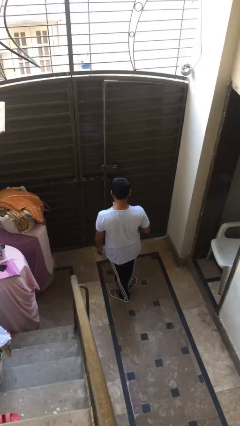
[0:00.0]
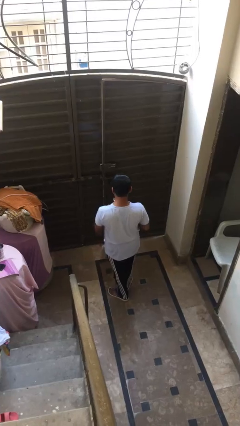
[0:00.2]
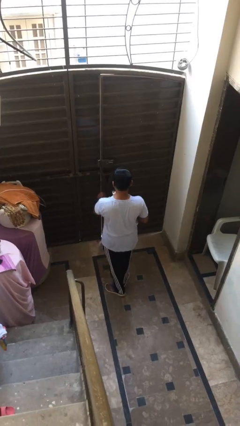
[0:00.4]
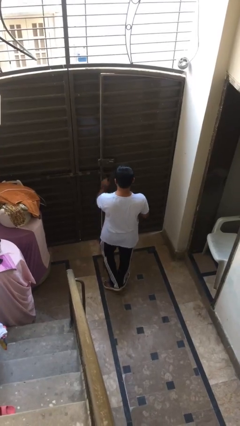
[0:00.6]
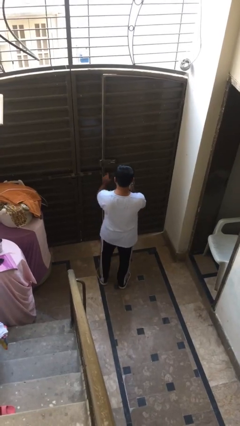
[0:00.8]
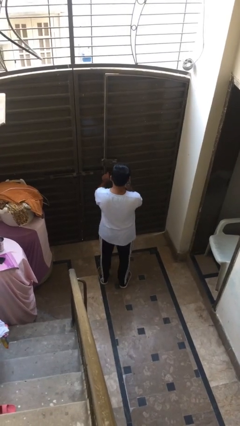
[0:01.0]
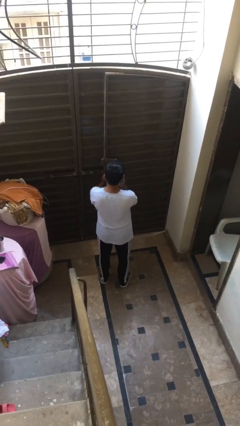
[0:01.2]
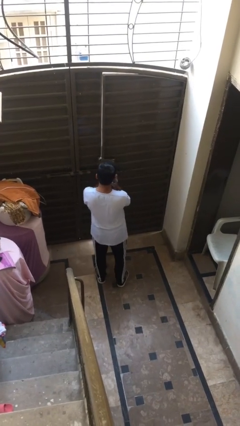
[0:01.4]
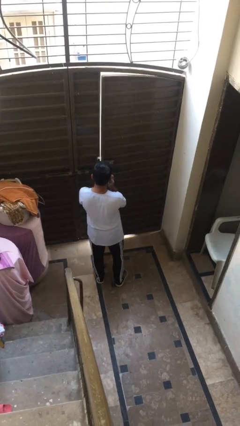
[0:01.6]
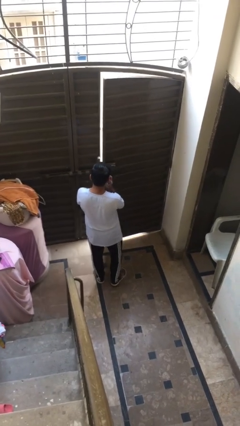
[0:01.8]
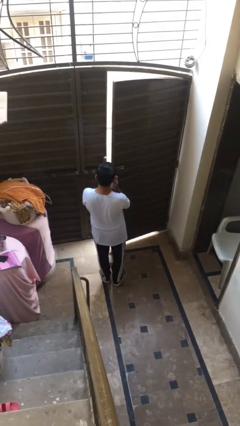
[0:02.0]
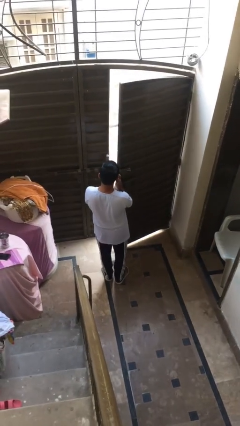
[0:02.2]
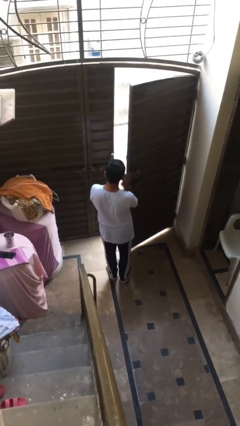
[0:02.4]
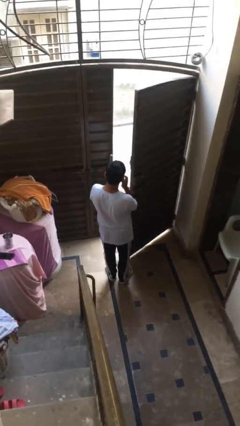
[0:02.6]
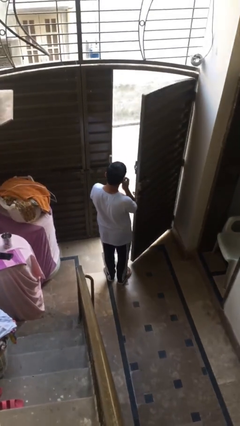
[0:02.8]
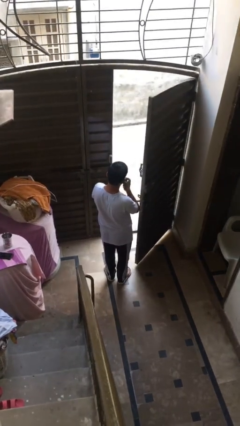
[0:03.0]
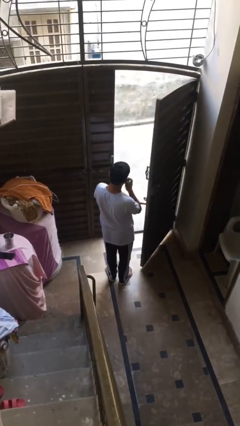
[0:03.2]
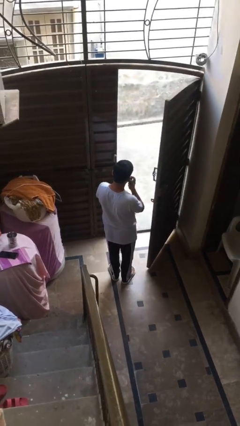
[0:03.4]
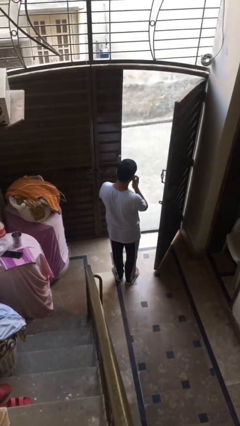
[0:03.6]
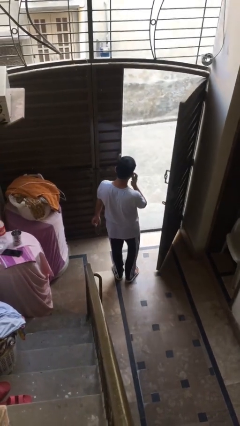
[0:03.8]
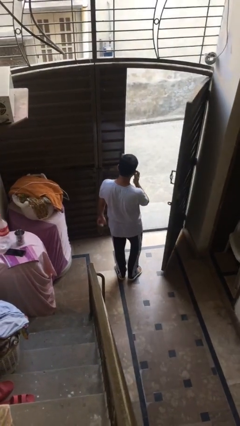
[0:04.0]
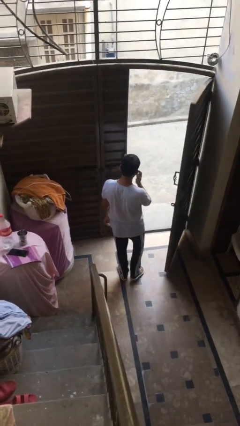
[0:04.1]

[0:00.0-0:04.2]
person opens facility door

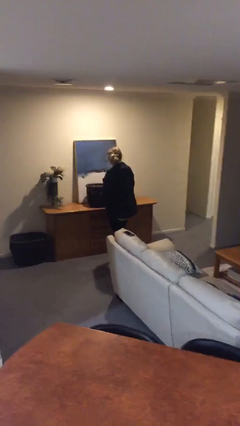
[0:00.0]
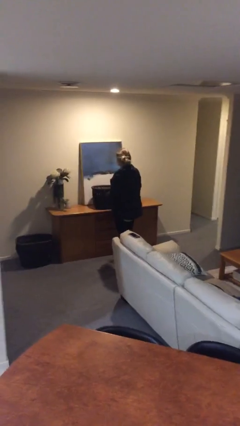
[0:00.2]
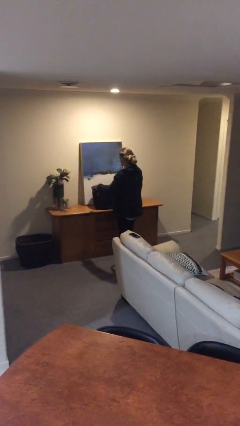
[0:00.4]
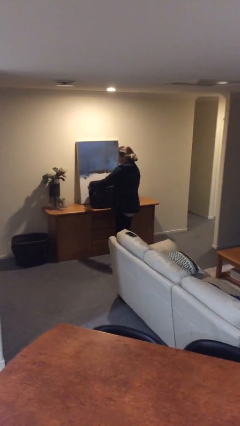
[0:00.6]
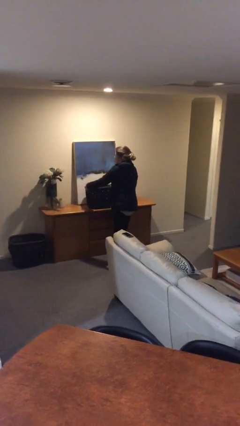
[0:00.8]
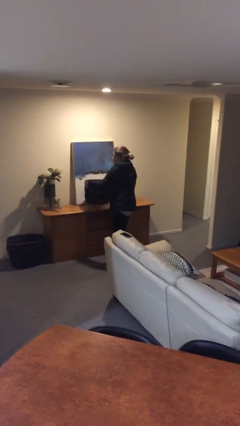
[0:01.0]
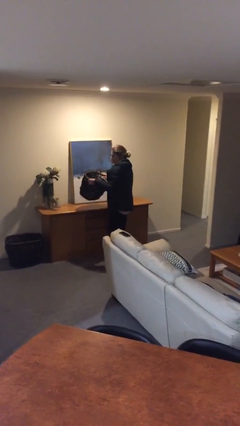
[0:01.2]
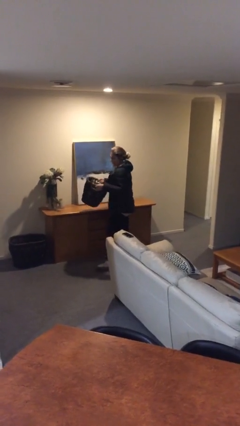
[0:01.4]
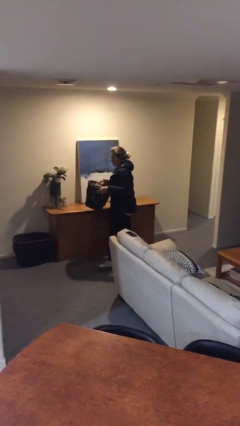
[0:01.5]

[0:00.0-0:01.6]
person picks up object from table

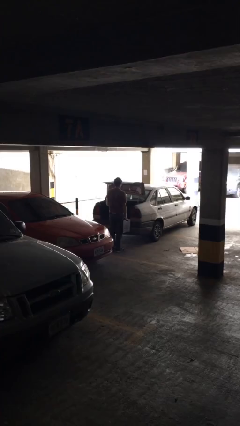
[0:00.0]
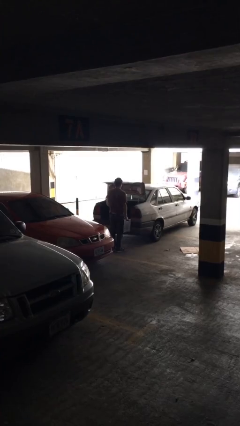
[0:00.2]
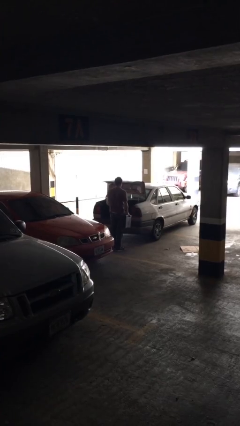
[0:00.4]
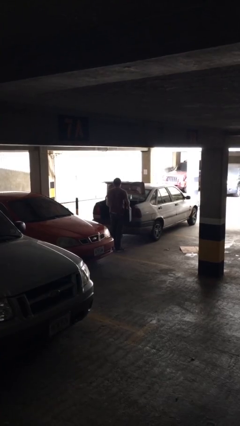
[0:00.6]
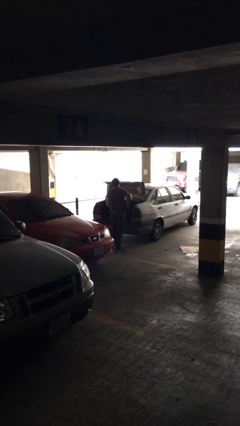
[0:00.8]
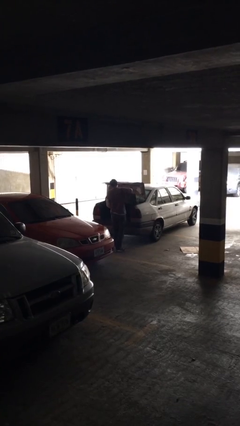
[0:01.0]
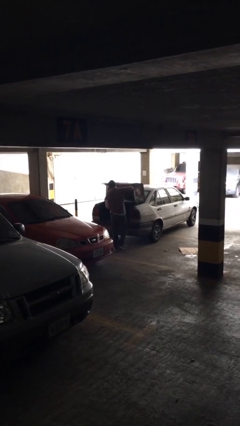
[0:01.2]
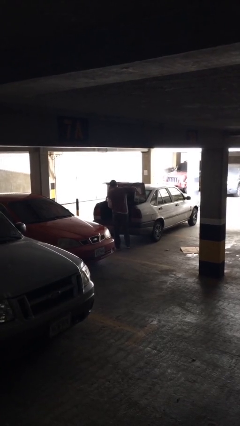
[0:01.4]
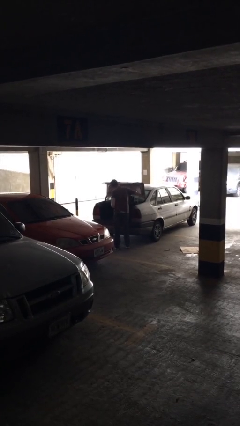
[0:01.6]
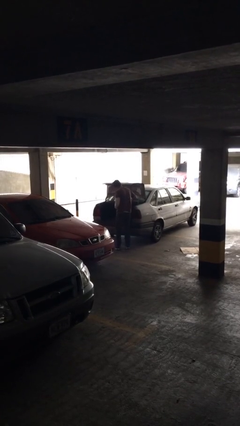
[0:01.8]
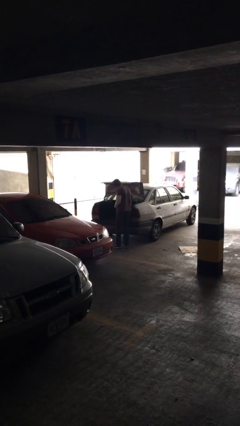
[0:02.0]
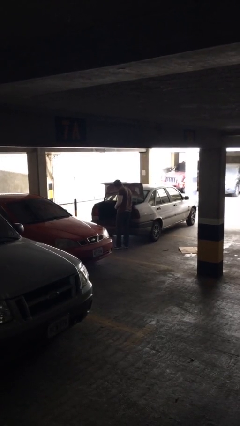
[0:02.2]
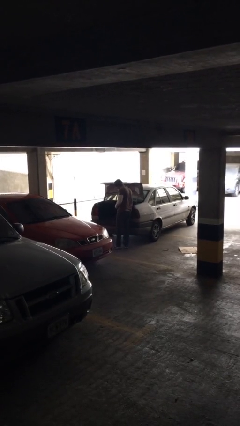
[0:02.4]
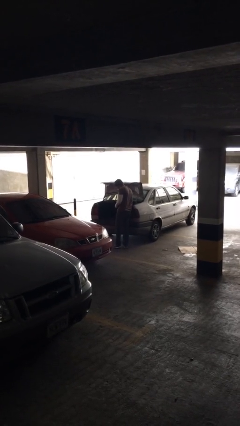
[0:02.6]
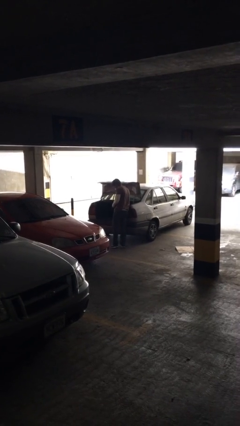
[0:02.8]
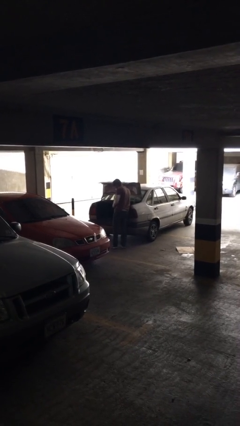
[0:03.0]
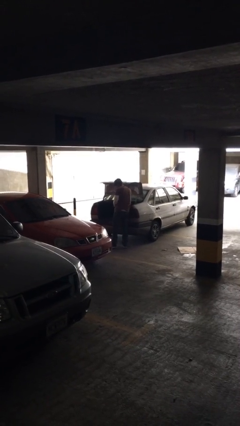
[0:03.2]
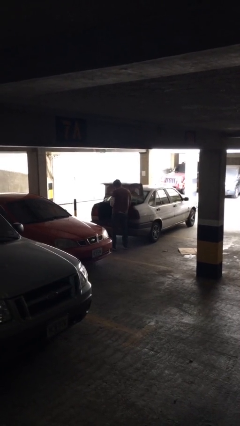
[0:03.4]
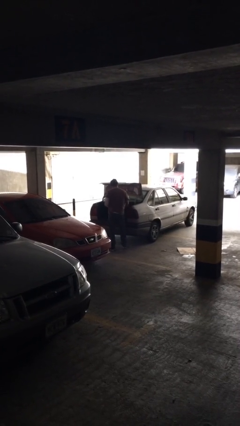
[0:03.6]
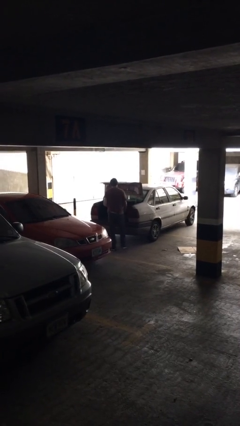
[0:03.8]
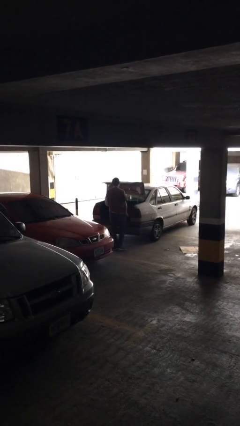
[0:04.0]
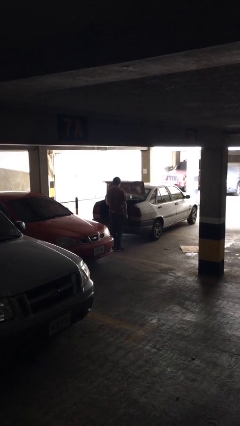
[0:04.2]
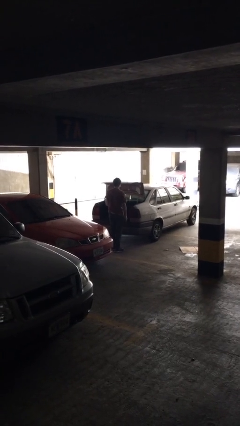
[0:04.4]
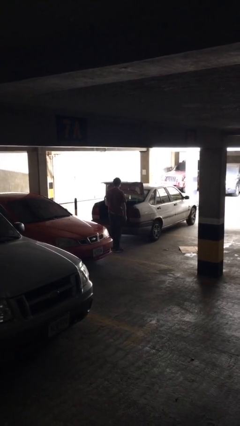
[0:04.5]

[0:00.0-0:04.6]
person loads car

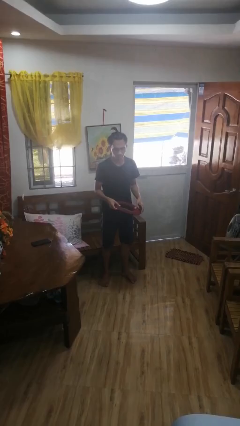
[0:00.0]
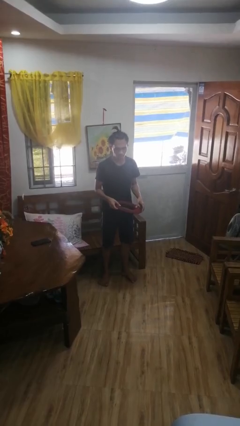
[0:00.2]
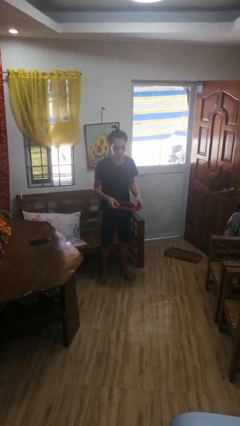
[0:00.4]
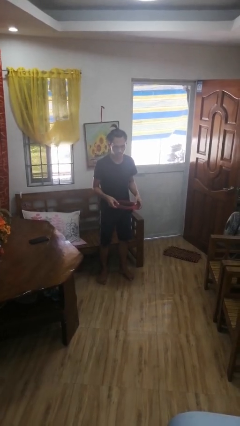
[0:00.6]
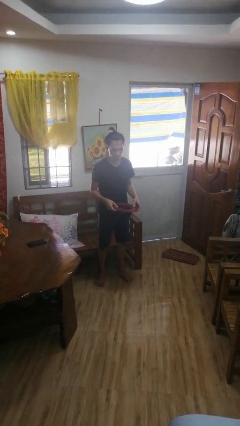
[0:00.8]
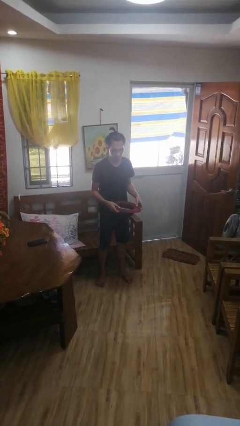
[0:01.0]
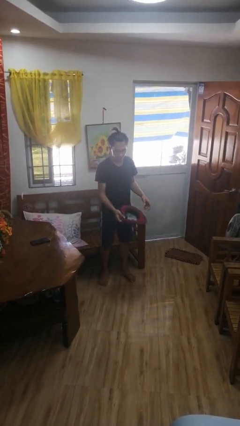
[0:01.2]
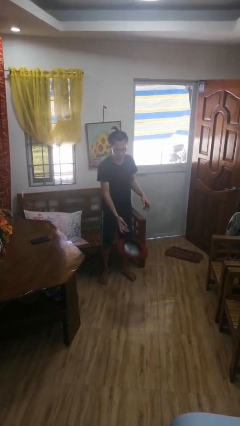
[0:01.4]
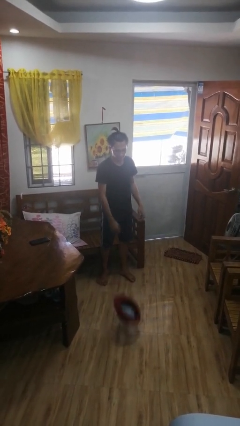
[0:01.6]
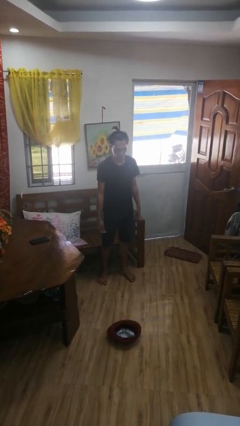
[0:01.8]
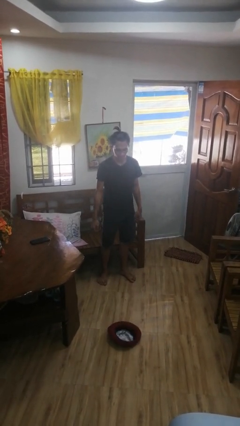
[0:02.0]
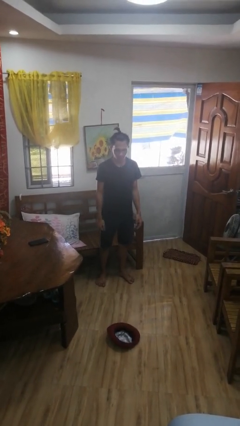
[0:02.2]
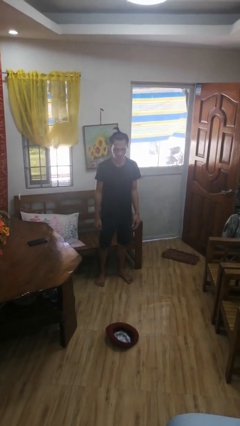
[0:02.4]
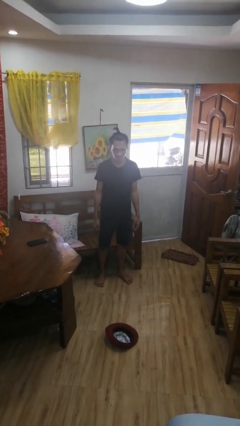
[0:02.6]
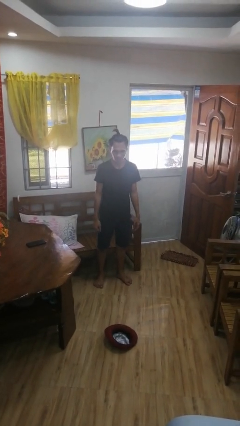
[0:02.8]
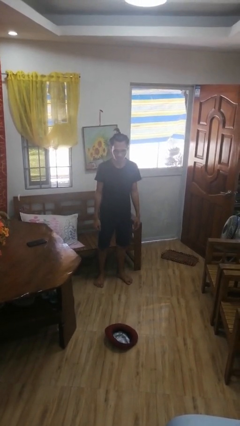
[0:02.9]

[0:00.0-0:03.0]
person throws object to ground

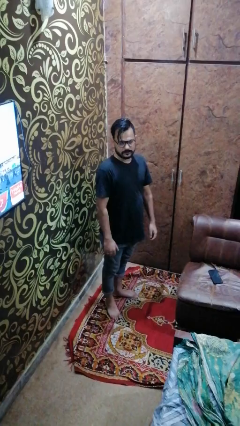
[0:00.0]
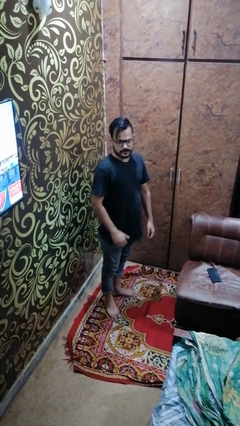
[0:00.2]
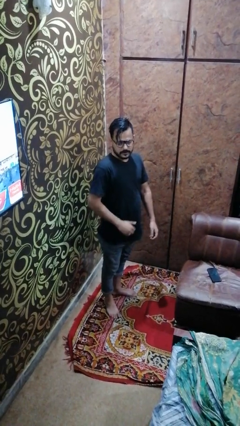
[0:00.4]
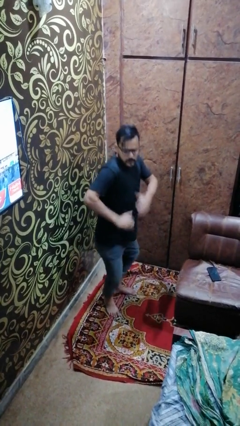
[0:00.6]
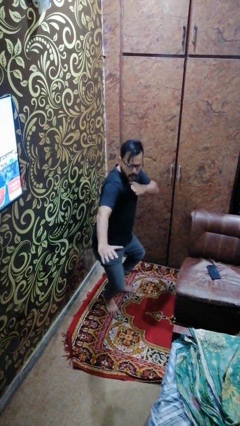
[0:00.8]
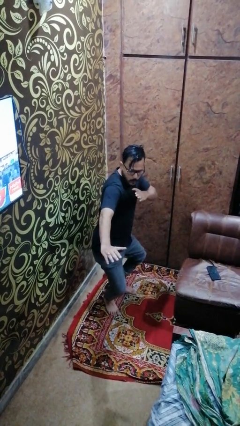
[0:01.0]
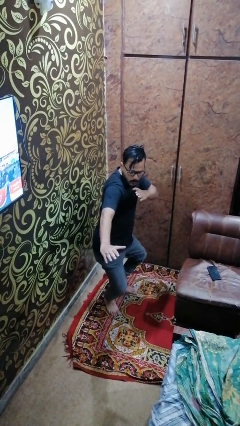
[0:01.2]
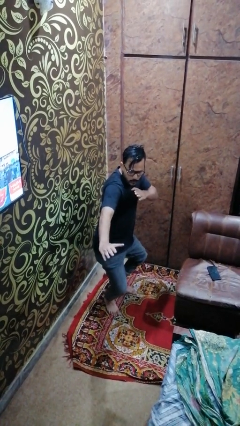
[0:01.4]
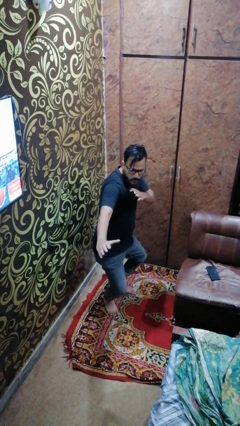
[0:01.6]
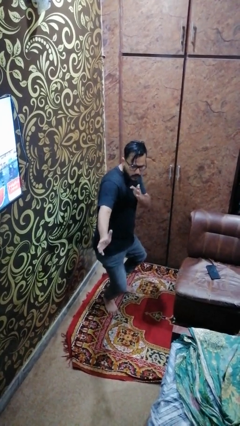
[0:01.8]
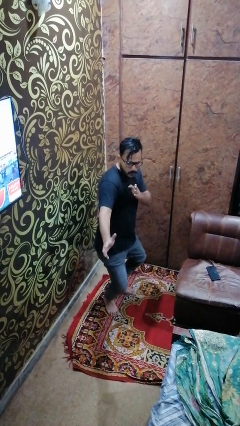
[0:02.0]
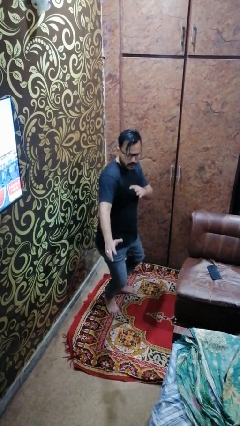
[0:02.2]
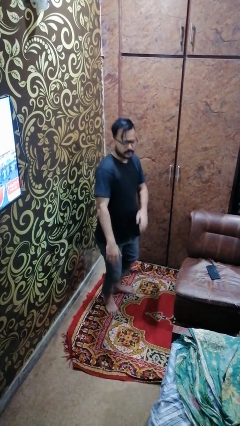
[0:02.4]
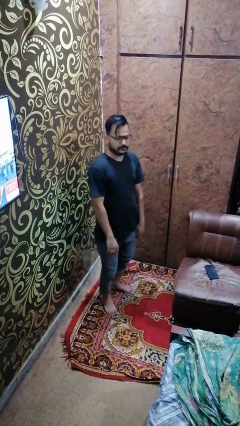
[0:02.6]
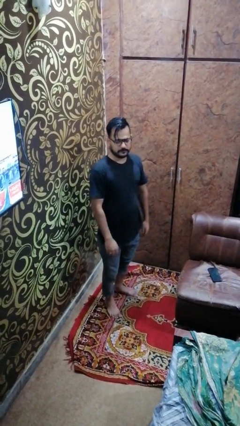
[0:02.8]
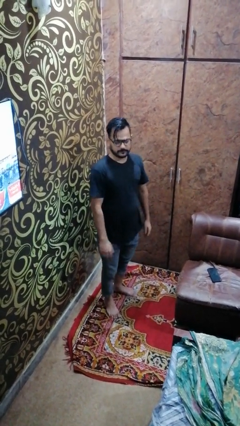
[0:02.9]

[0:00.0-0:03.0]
person karate chop

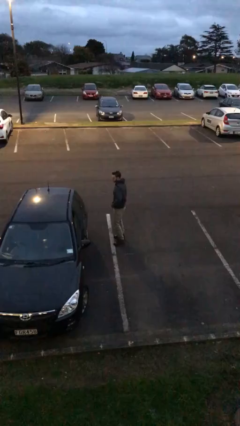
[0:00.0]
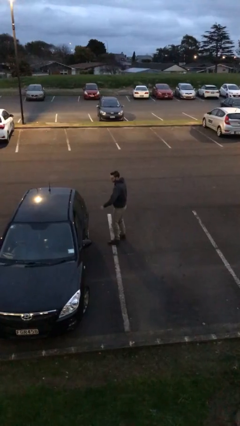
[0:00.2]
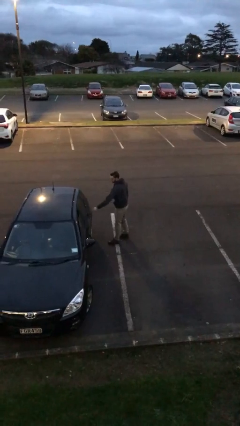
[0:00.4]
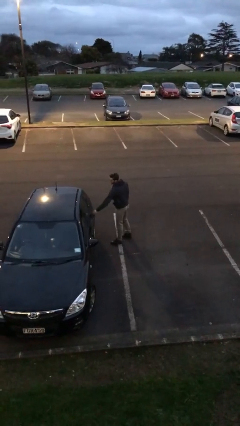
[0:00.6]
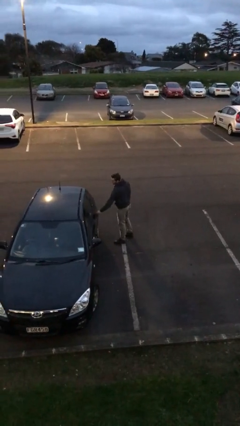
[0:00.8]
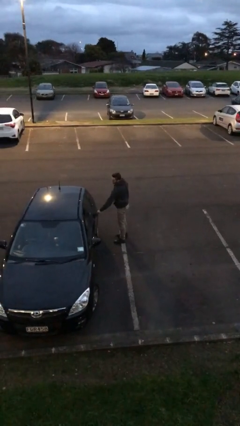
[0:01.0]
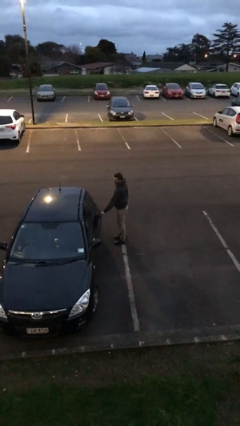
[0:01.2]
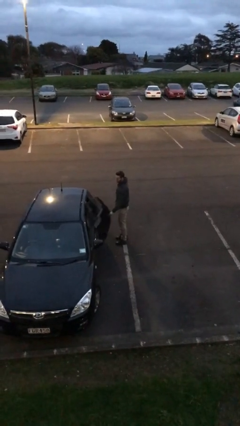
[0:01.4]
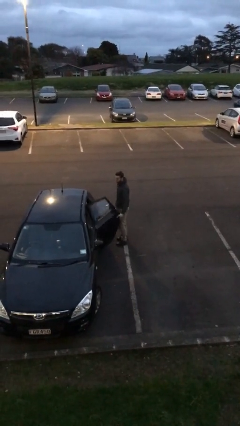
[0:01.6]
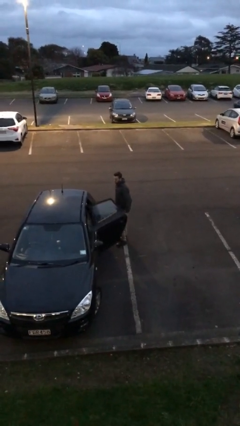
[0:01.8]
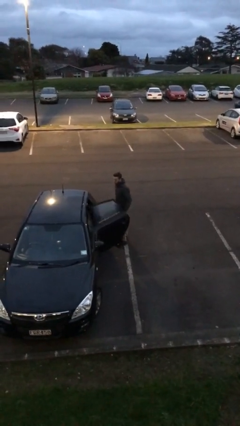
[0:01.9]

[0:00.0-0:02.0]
person opens car door
